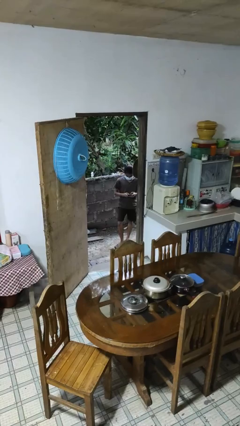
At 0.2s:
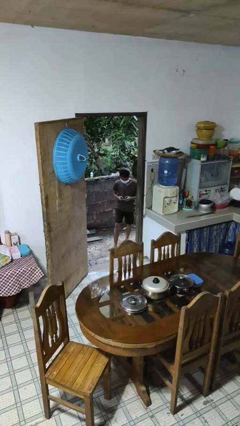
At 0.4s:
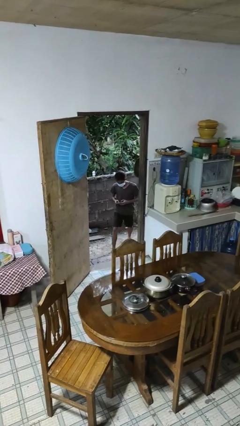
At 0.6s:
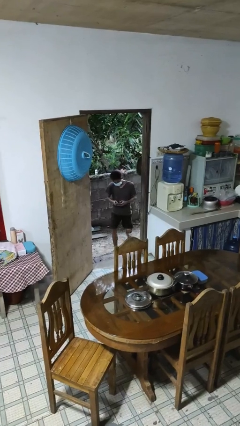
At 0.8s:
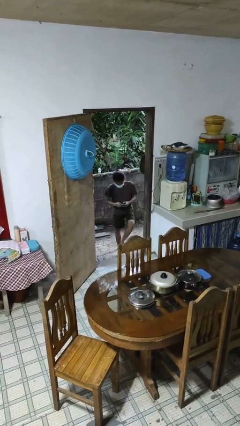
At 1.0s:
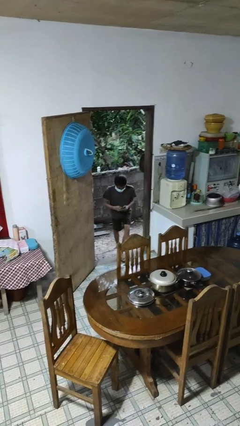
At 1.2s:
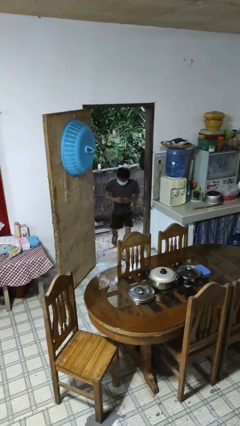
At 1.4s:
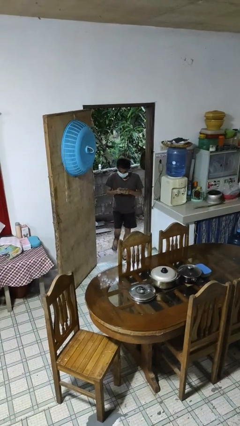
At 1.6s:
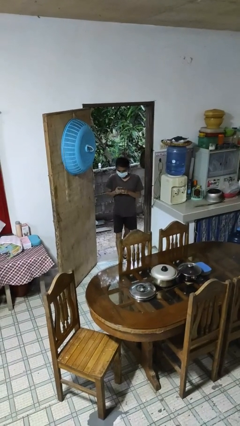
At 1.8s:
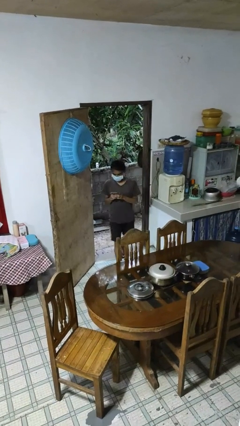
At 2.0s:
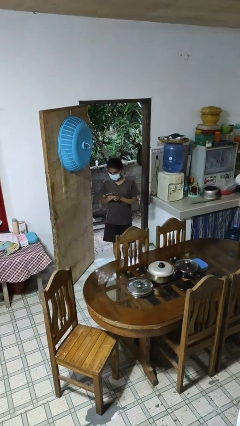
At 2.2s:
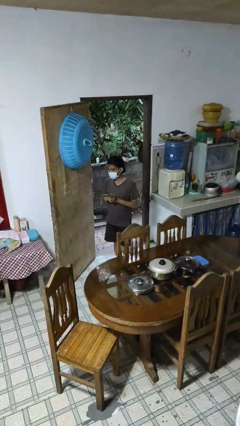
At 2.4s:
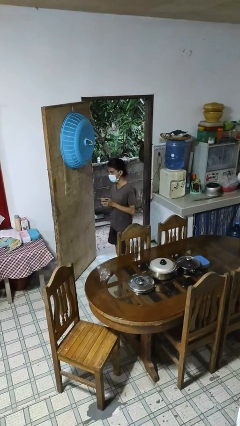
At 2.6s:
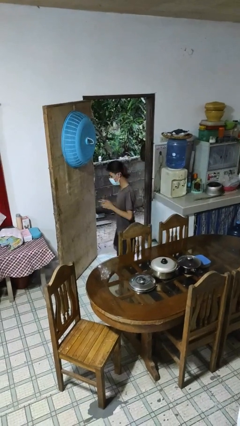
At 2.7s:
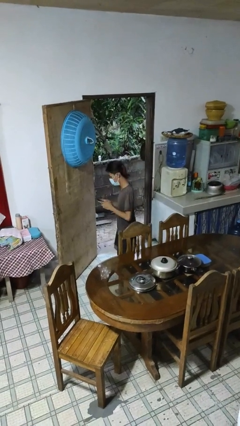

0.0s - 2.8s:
person enters scene through structure

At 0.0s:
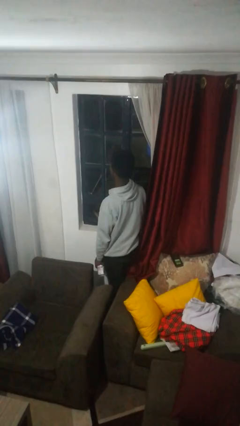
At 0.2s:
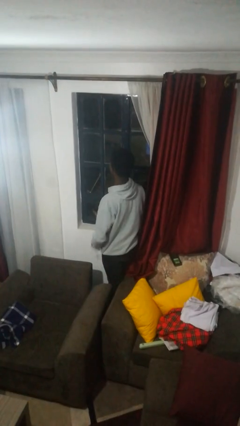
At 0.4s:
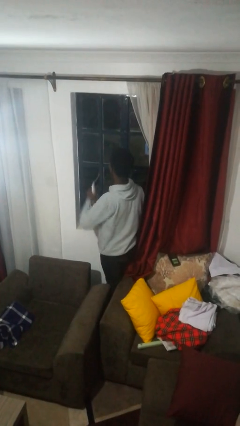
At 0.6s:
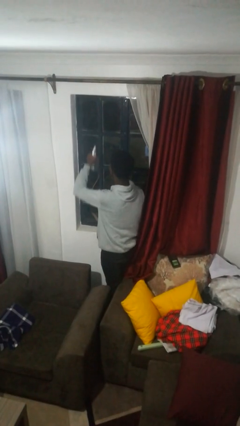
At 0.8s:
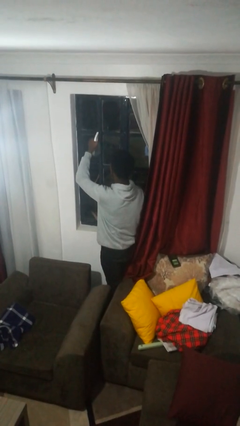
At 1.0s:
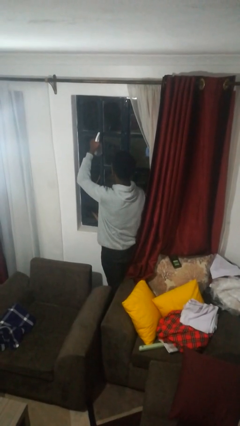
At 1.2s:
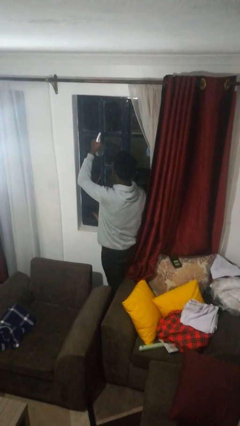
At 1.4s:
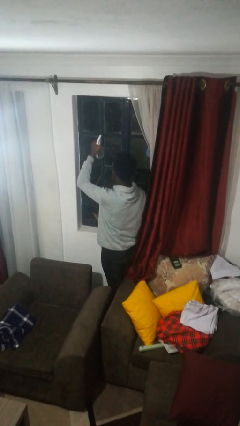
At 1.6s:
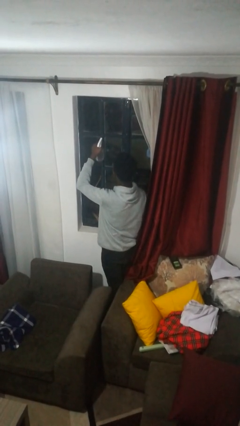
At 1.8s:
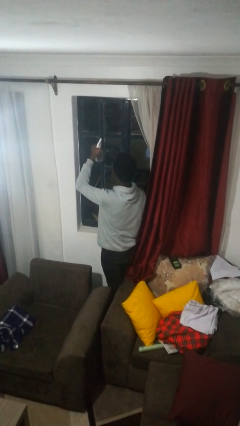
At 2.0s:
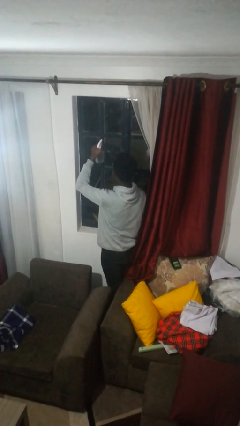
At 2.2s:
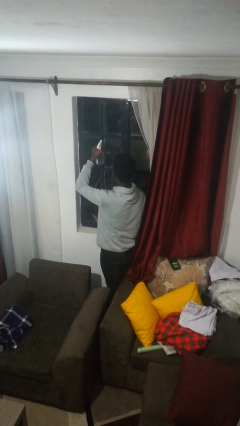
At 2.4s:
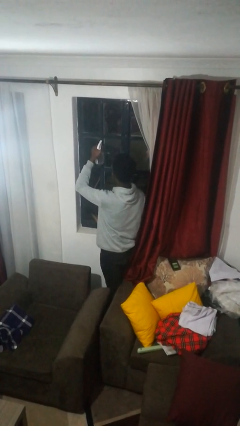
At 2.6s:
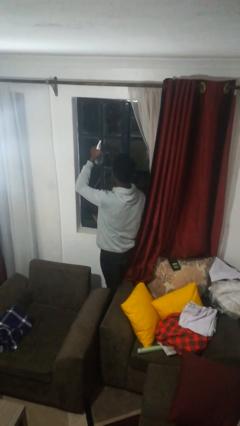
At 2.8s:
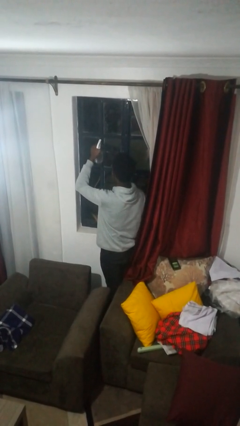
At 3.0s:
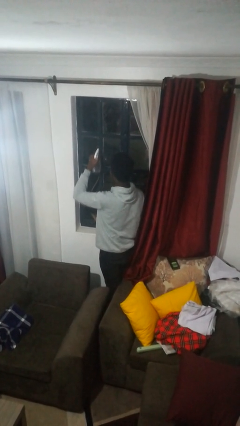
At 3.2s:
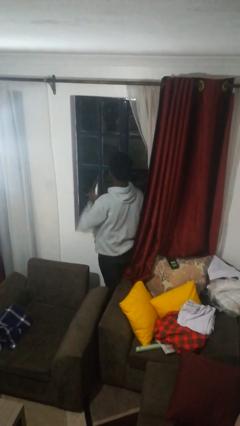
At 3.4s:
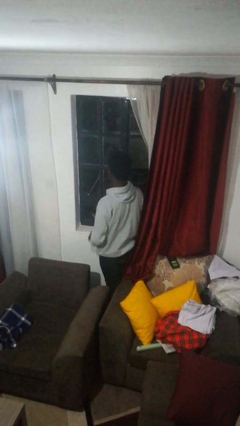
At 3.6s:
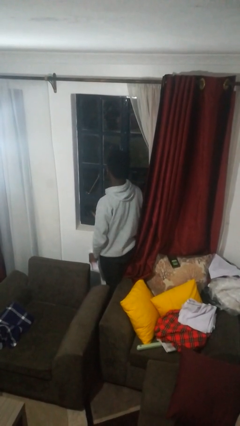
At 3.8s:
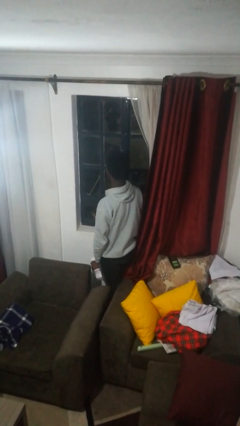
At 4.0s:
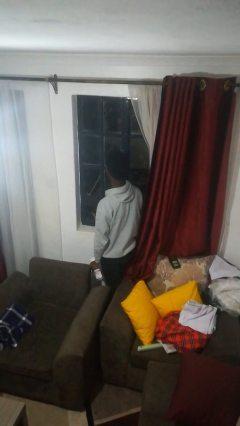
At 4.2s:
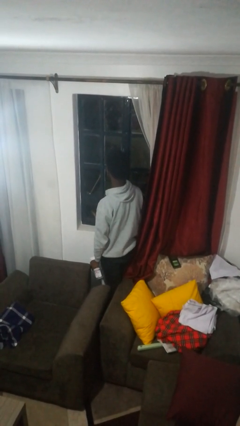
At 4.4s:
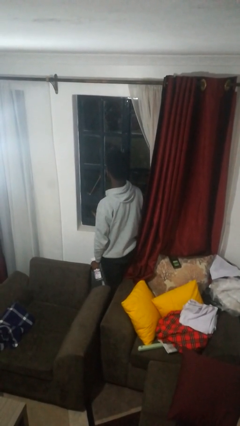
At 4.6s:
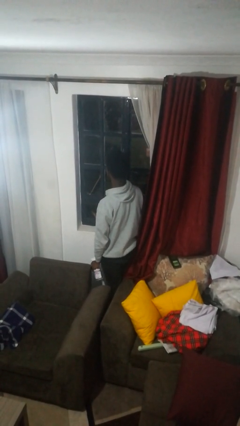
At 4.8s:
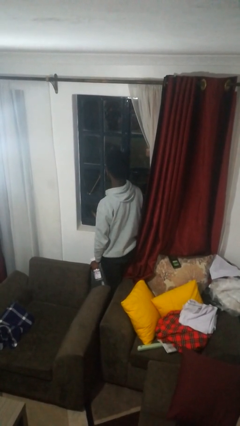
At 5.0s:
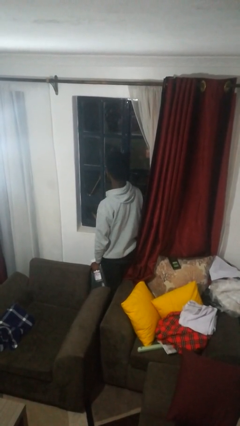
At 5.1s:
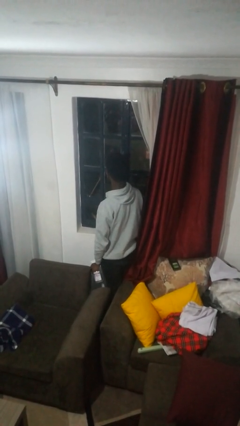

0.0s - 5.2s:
person sprays from bottle

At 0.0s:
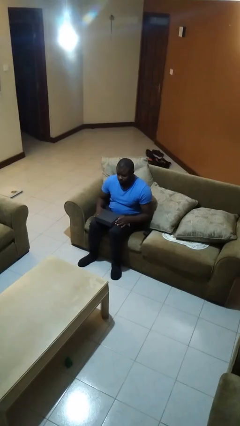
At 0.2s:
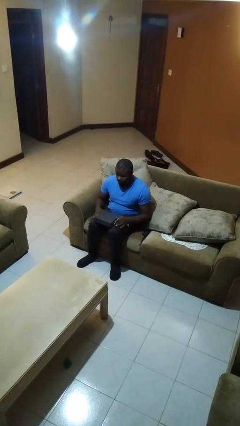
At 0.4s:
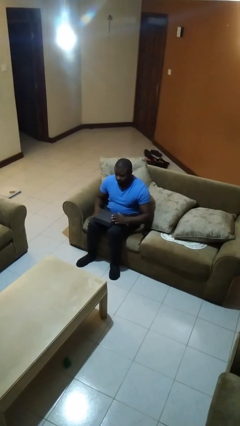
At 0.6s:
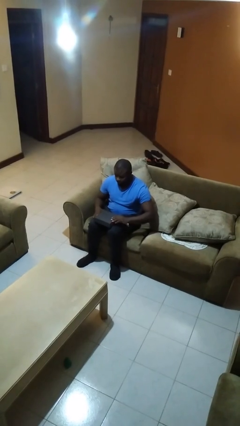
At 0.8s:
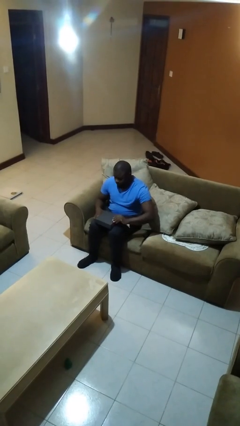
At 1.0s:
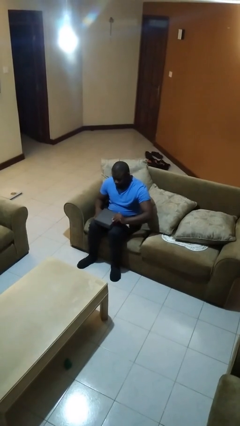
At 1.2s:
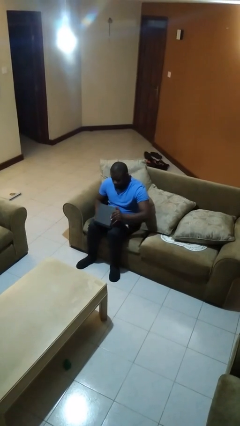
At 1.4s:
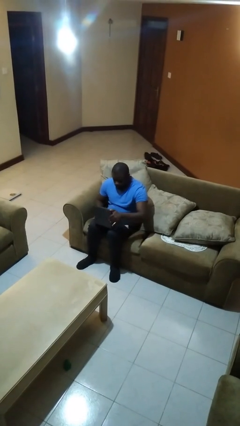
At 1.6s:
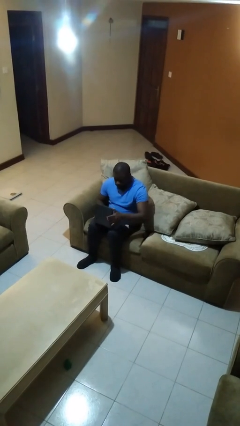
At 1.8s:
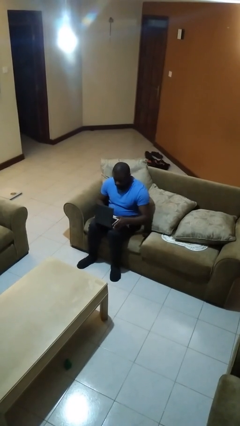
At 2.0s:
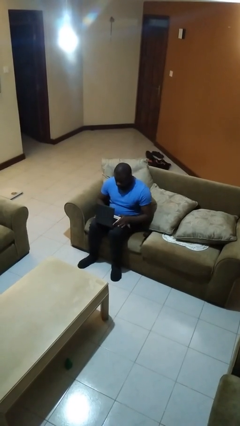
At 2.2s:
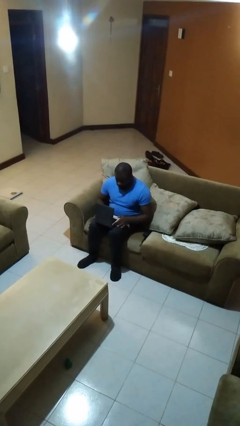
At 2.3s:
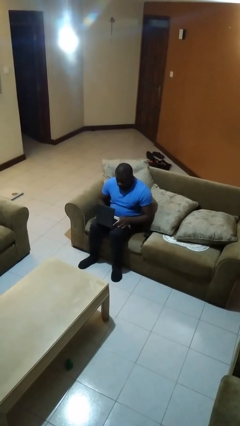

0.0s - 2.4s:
person opens jewelry box

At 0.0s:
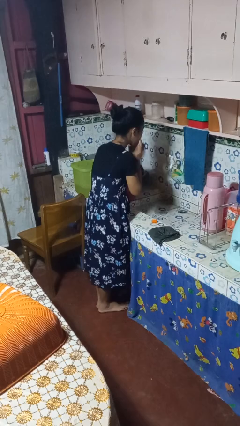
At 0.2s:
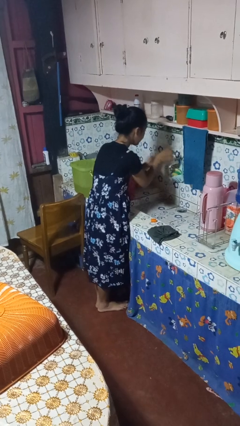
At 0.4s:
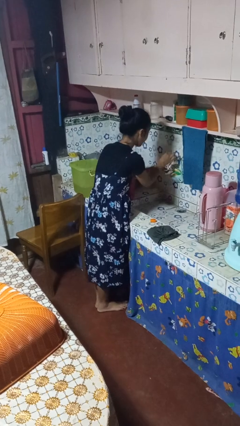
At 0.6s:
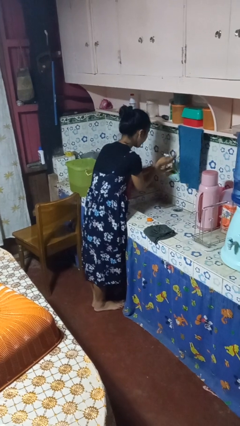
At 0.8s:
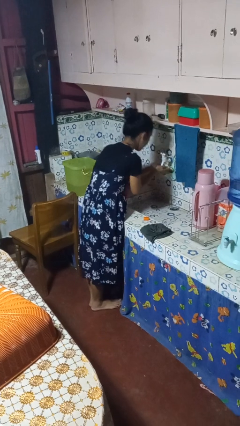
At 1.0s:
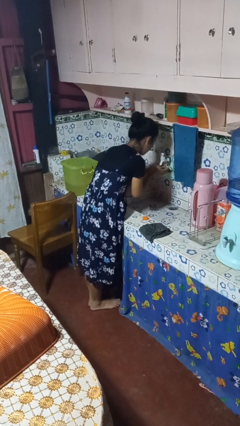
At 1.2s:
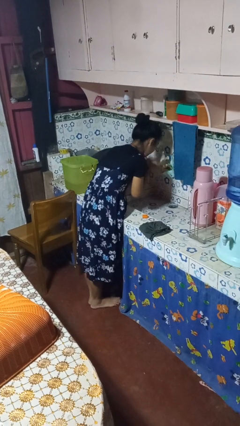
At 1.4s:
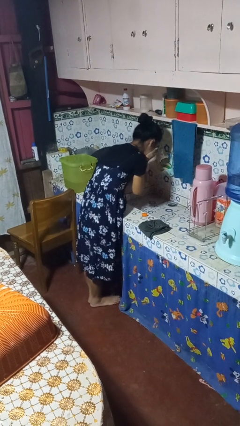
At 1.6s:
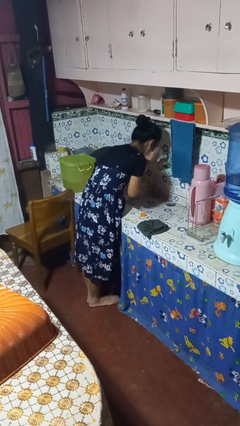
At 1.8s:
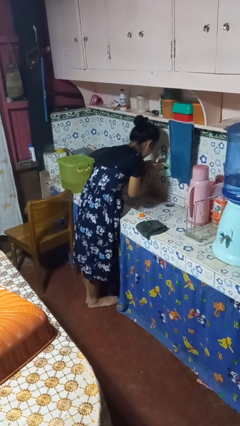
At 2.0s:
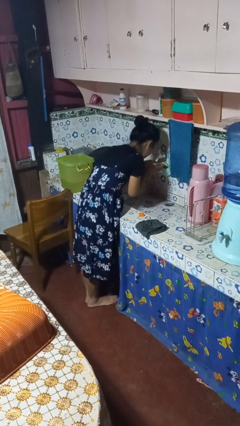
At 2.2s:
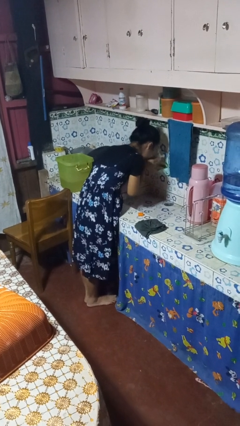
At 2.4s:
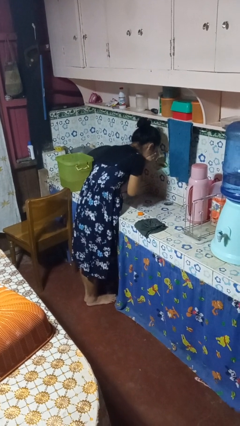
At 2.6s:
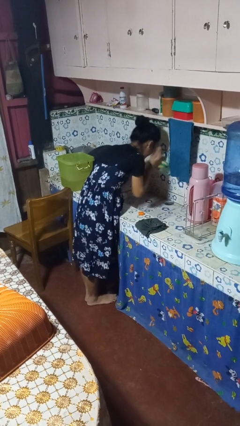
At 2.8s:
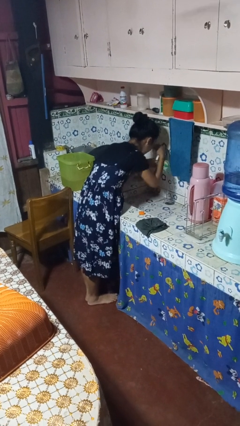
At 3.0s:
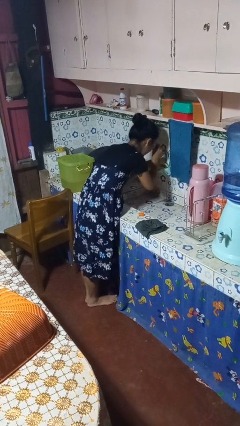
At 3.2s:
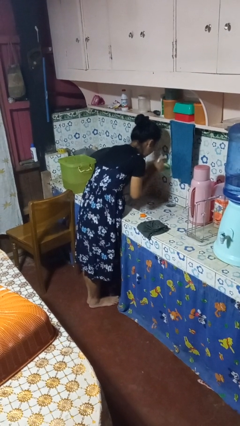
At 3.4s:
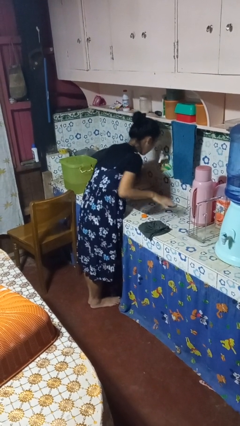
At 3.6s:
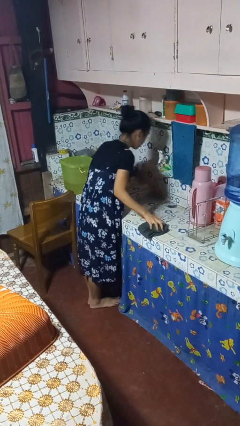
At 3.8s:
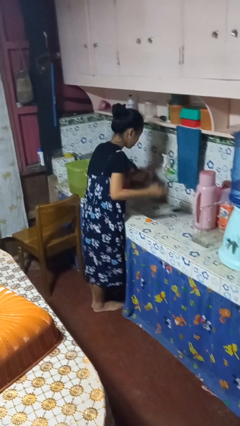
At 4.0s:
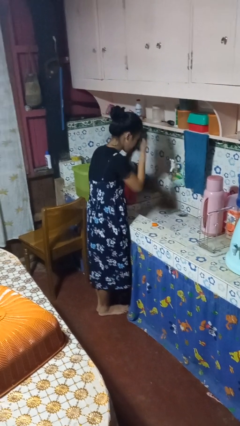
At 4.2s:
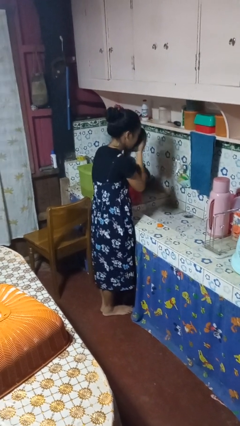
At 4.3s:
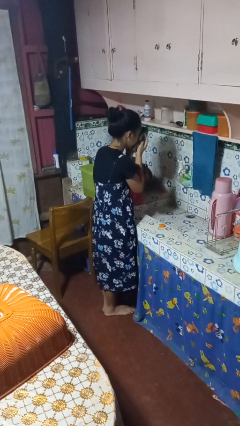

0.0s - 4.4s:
person washes face

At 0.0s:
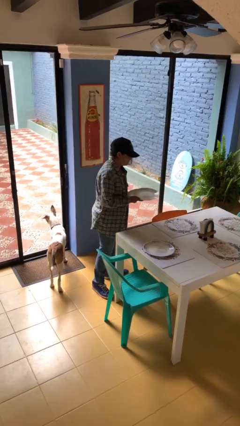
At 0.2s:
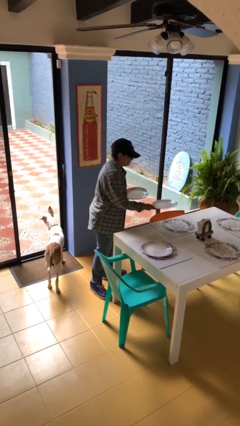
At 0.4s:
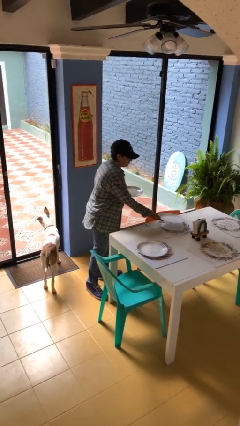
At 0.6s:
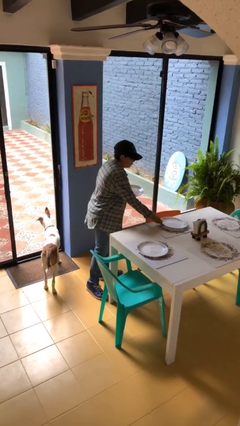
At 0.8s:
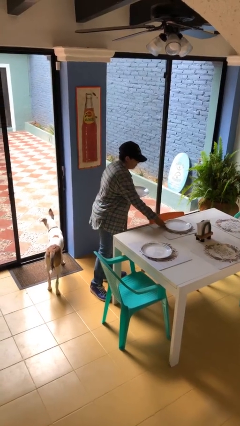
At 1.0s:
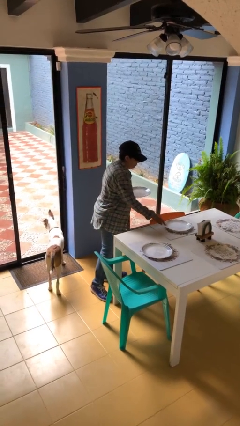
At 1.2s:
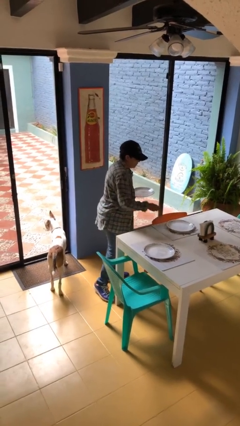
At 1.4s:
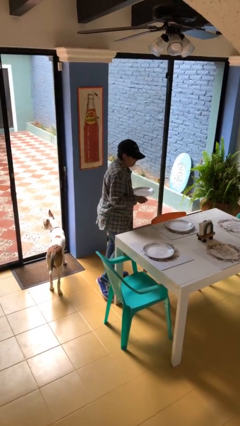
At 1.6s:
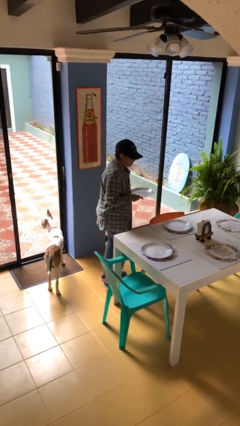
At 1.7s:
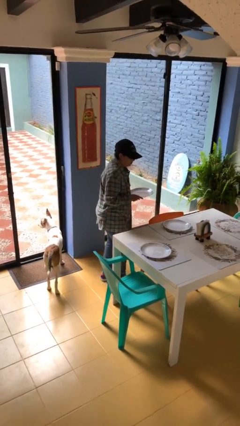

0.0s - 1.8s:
person sets table

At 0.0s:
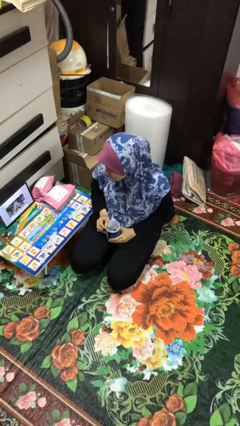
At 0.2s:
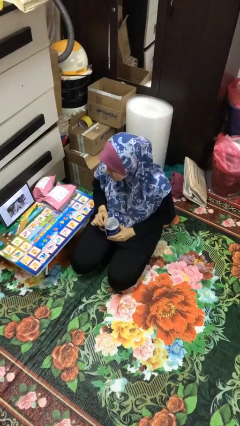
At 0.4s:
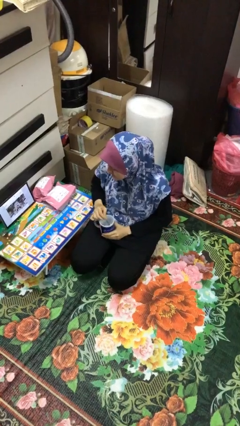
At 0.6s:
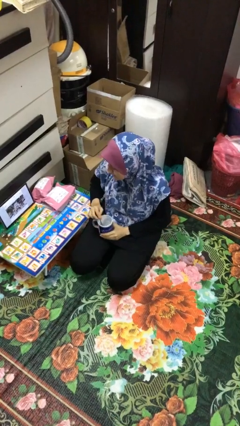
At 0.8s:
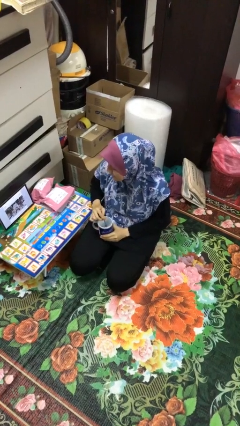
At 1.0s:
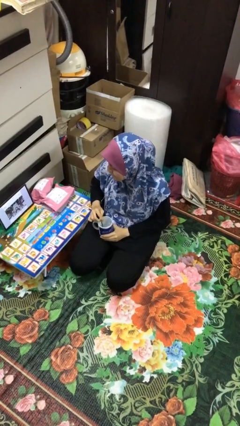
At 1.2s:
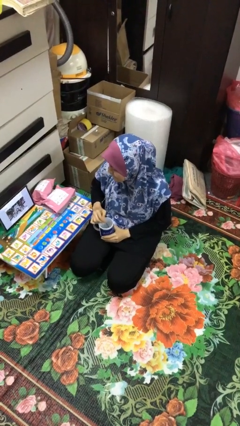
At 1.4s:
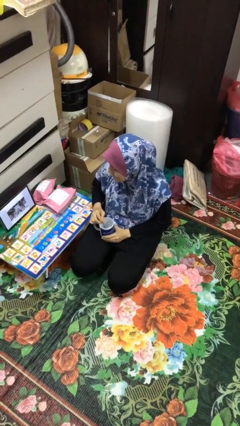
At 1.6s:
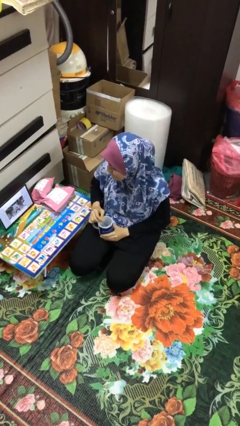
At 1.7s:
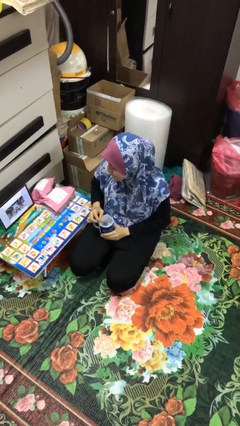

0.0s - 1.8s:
person stirs mug
